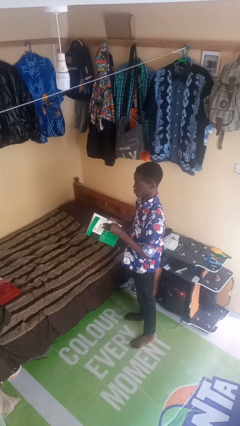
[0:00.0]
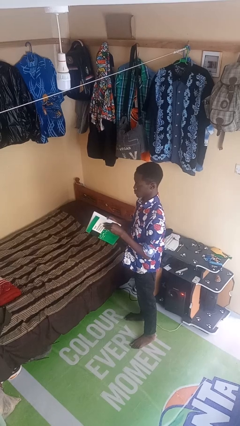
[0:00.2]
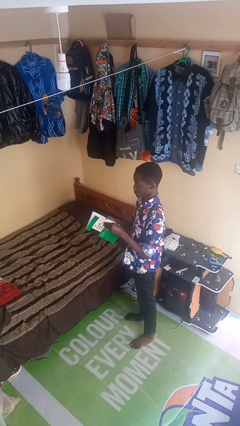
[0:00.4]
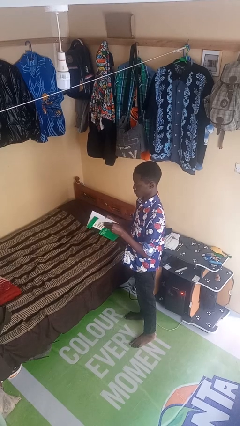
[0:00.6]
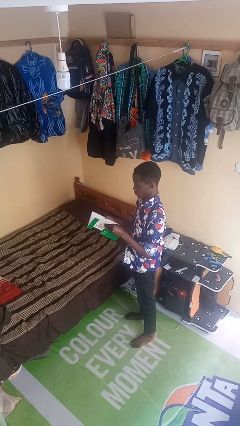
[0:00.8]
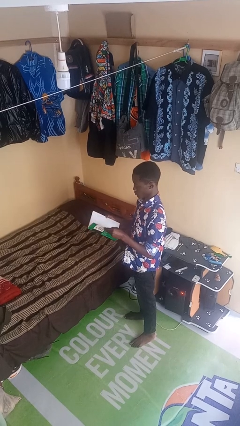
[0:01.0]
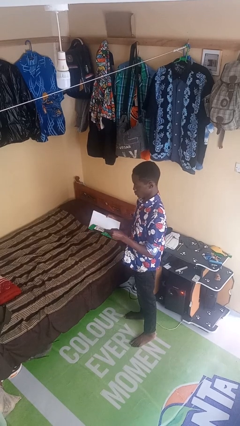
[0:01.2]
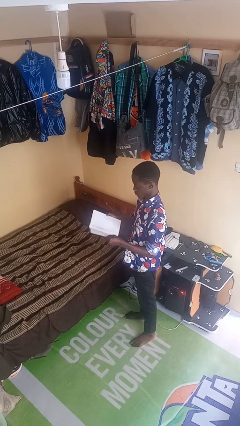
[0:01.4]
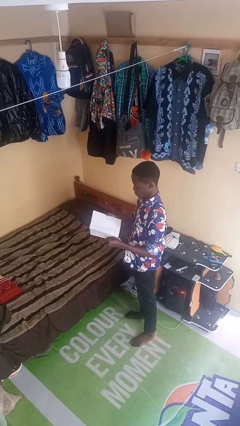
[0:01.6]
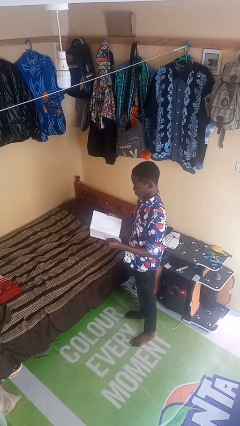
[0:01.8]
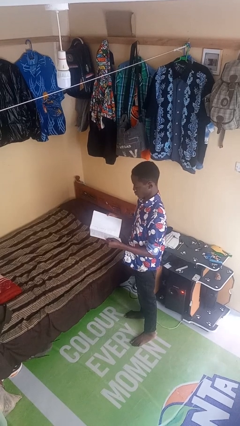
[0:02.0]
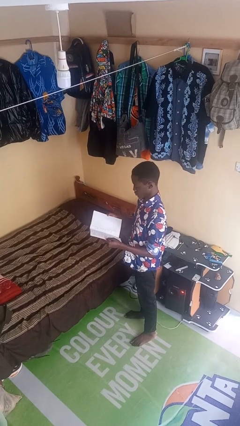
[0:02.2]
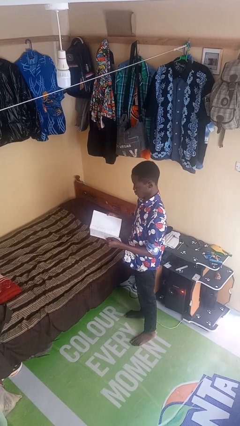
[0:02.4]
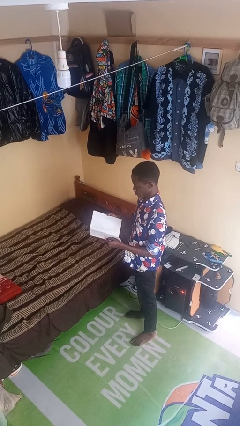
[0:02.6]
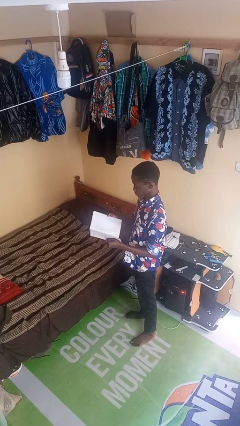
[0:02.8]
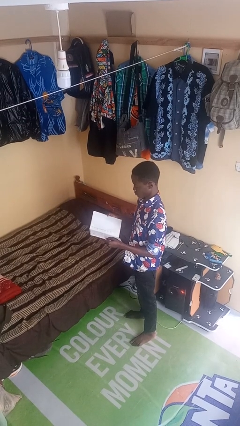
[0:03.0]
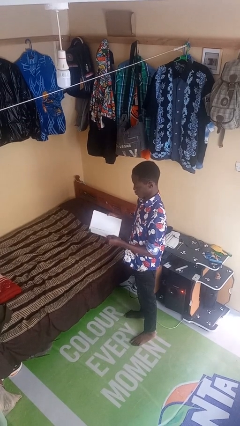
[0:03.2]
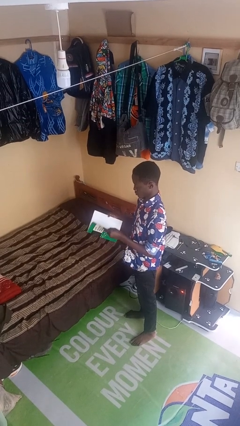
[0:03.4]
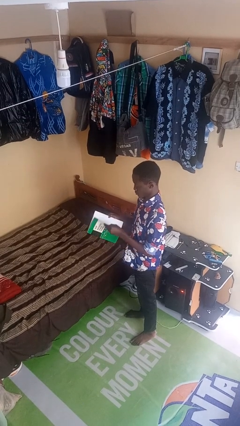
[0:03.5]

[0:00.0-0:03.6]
person reads magazine

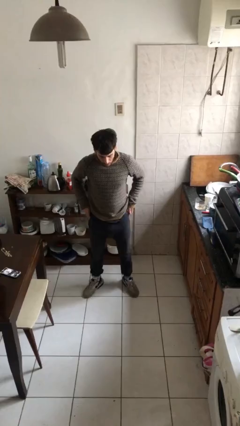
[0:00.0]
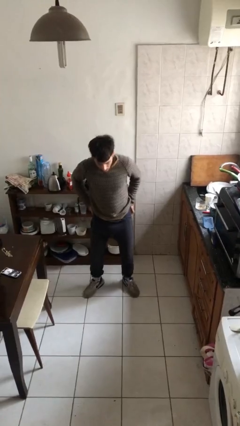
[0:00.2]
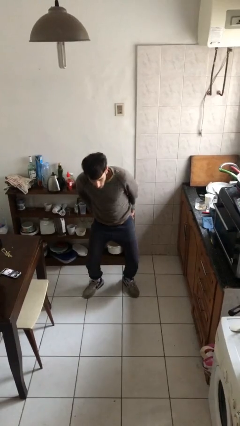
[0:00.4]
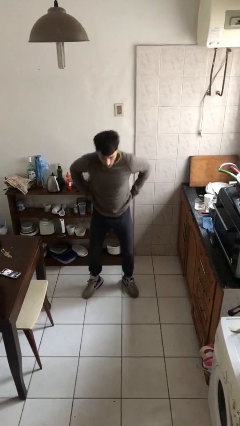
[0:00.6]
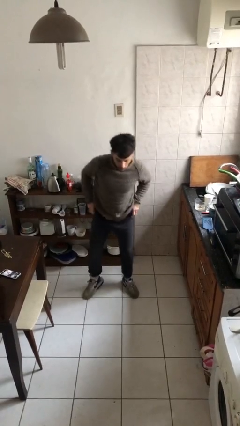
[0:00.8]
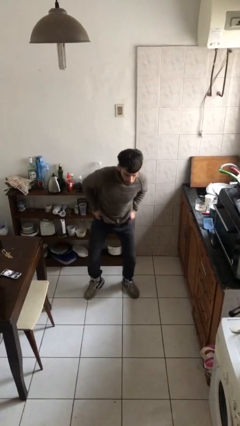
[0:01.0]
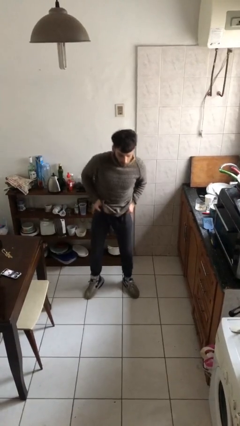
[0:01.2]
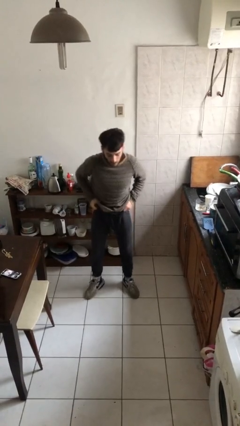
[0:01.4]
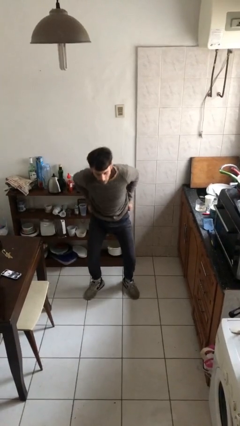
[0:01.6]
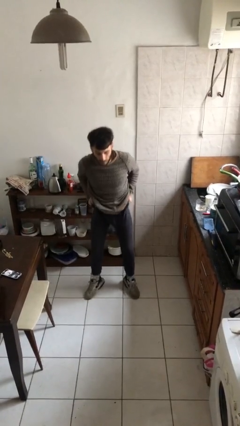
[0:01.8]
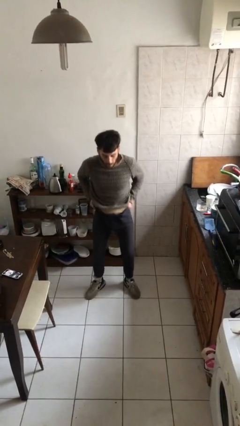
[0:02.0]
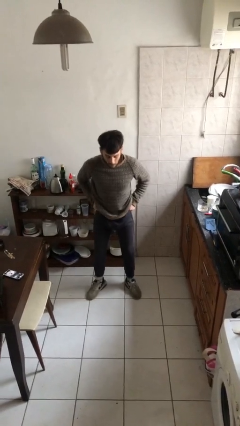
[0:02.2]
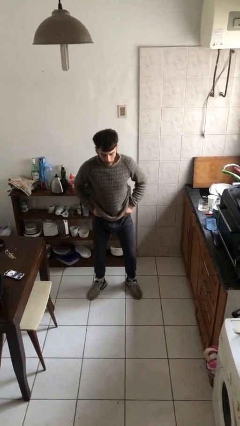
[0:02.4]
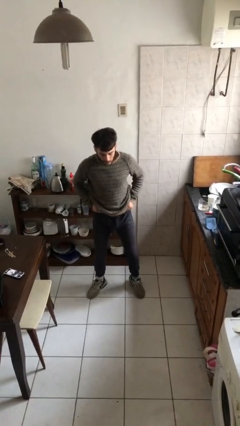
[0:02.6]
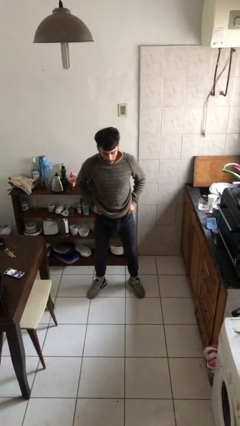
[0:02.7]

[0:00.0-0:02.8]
person hikes up pants

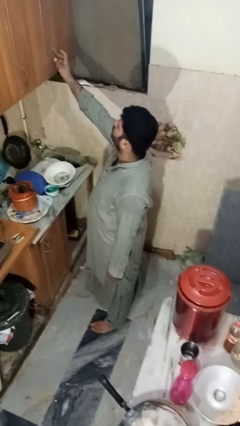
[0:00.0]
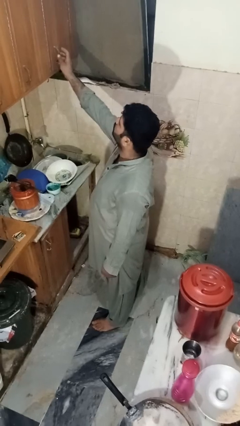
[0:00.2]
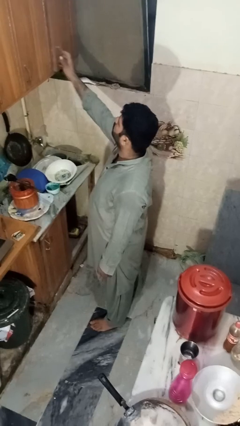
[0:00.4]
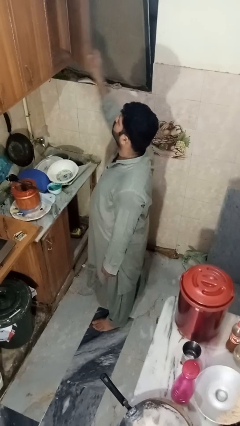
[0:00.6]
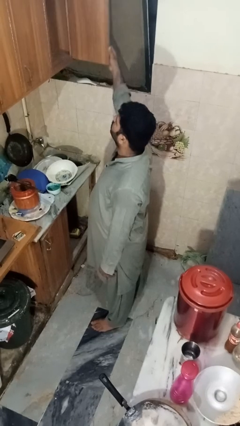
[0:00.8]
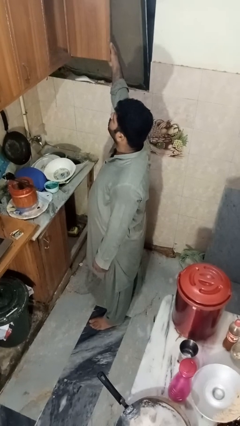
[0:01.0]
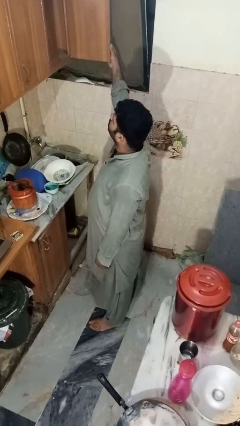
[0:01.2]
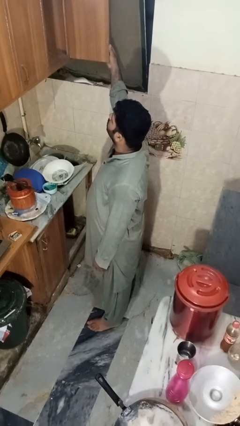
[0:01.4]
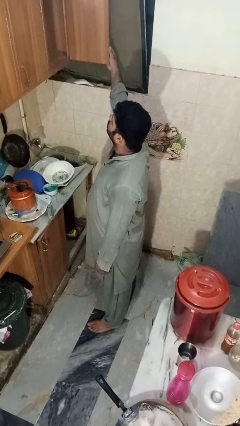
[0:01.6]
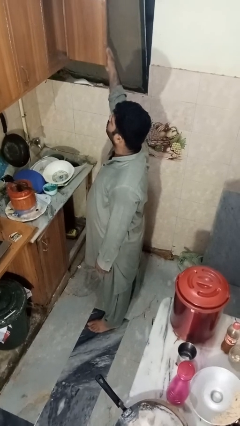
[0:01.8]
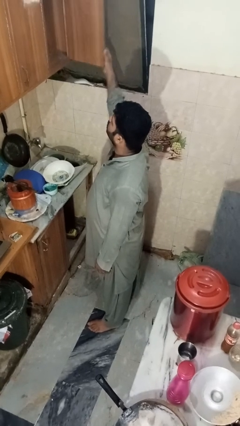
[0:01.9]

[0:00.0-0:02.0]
person opens cabinet

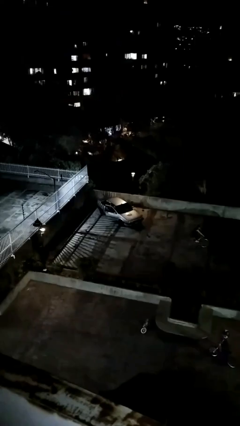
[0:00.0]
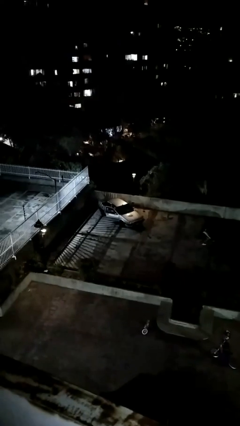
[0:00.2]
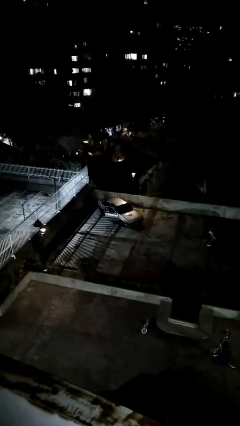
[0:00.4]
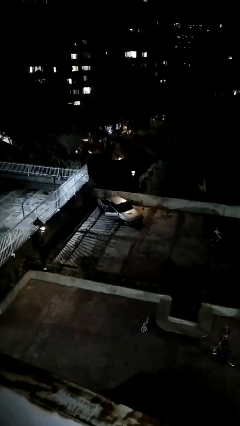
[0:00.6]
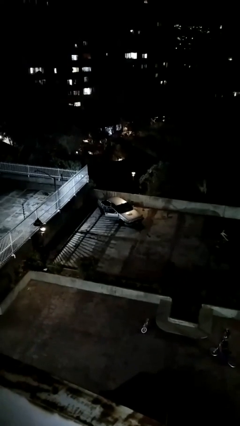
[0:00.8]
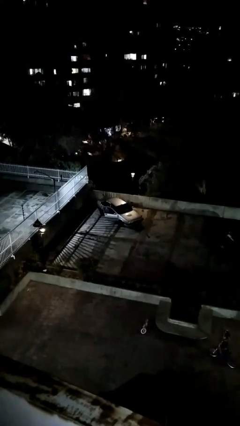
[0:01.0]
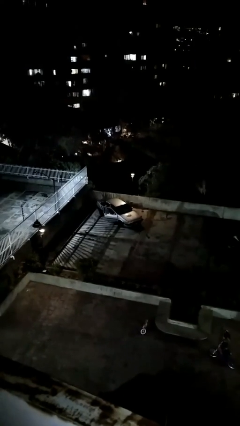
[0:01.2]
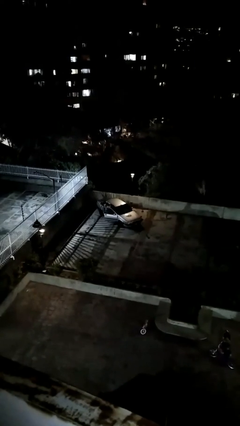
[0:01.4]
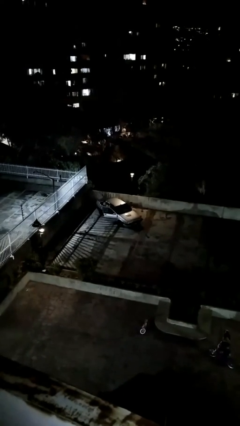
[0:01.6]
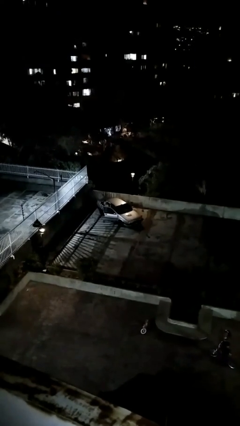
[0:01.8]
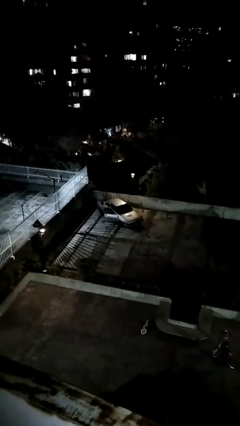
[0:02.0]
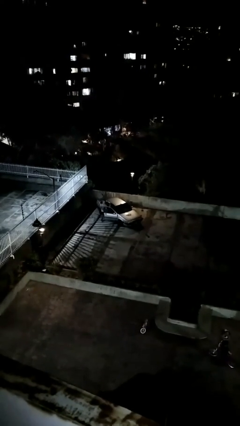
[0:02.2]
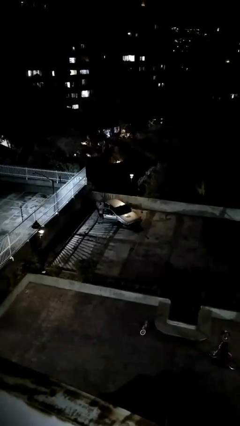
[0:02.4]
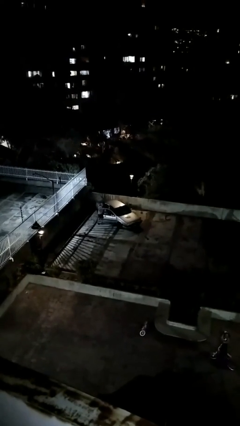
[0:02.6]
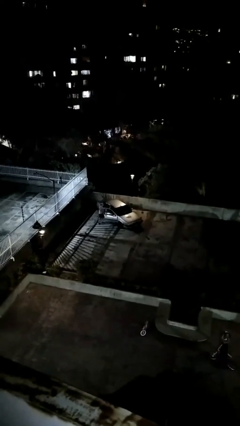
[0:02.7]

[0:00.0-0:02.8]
car drops off person

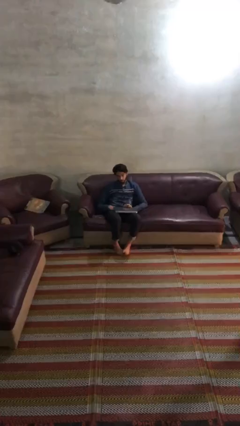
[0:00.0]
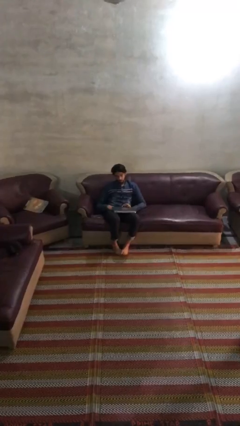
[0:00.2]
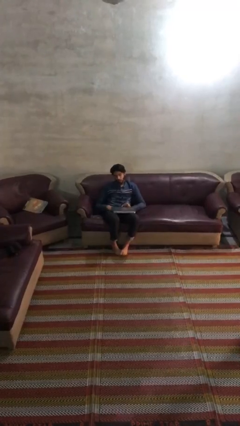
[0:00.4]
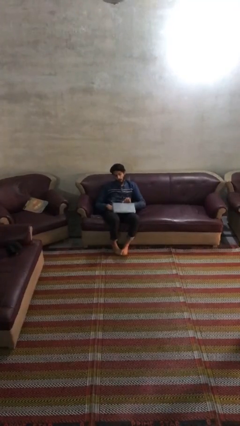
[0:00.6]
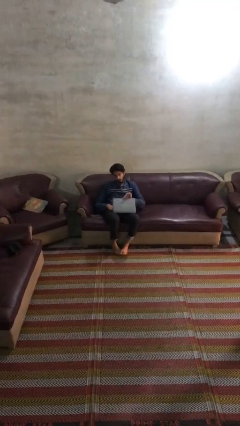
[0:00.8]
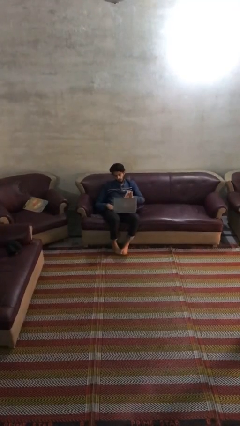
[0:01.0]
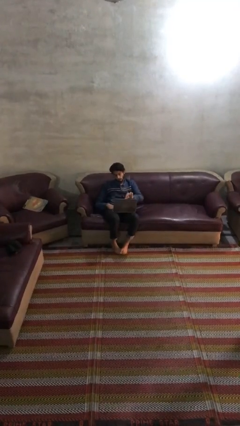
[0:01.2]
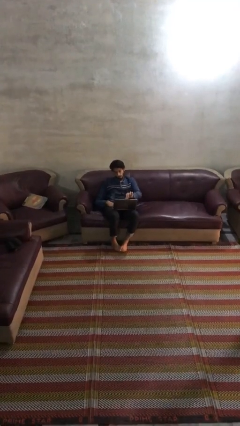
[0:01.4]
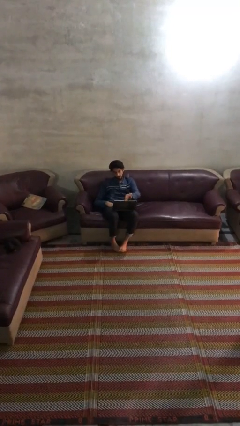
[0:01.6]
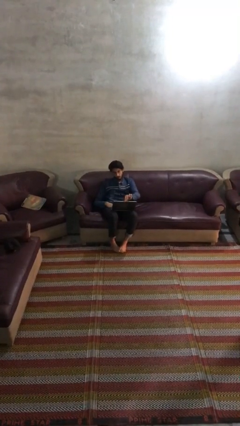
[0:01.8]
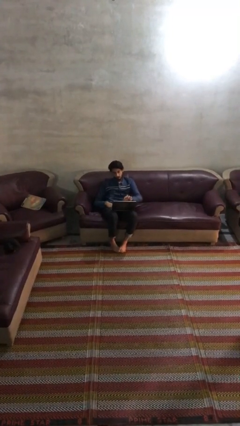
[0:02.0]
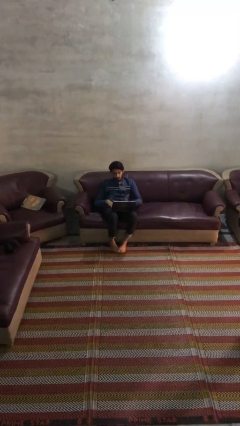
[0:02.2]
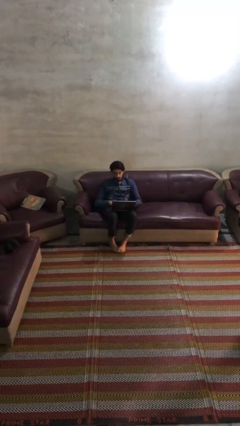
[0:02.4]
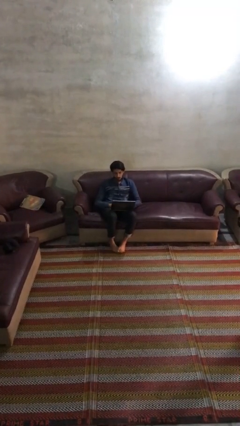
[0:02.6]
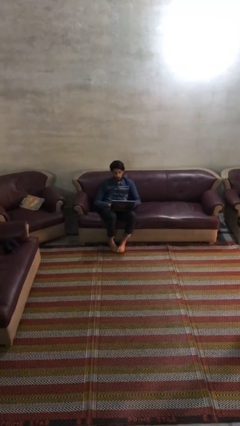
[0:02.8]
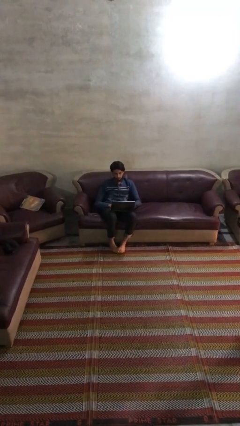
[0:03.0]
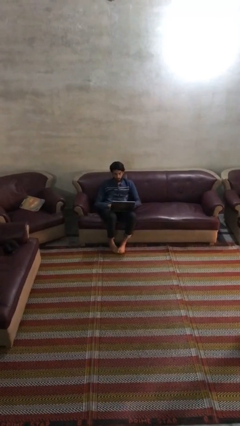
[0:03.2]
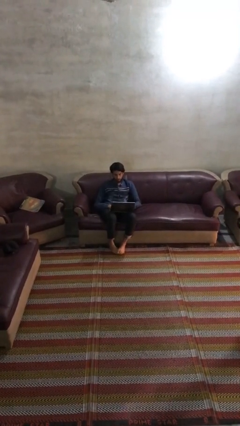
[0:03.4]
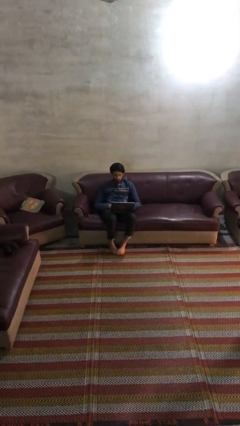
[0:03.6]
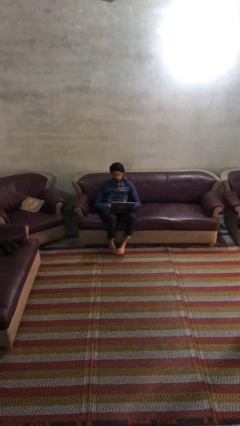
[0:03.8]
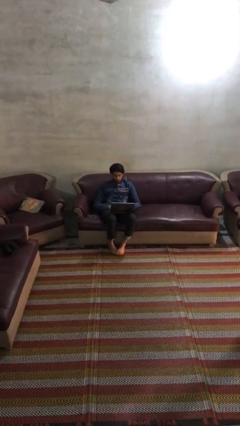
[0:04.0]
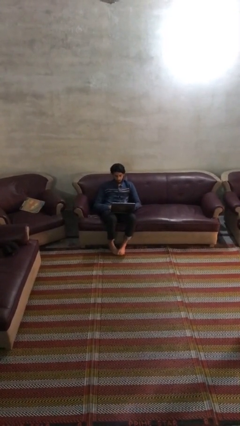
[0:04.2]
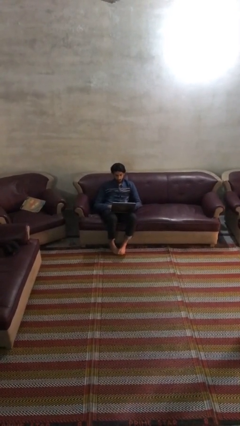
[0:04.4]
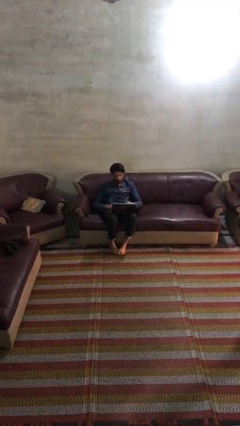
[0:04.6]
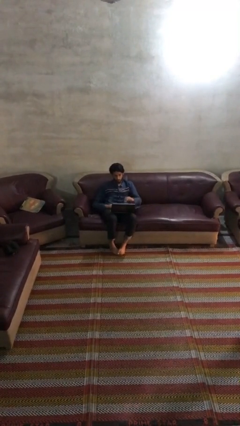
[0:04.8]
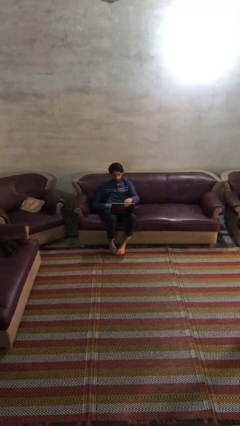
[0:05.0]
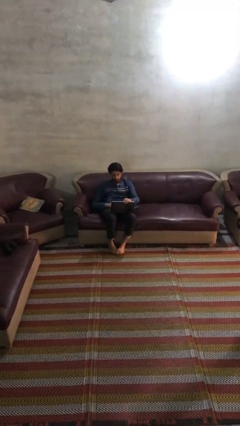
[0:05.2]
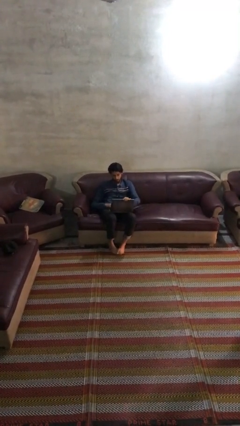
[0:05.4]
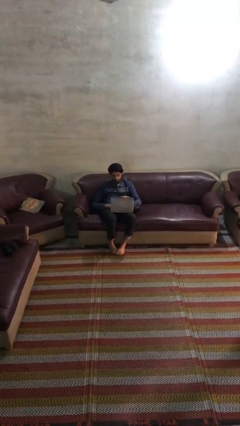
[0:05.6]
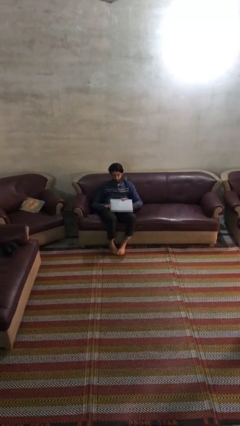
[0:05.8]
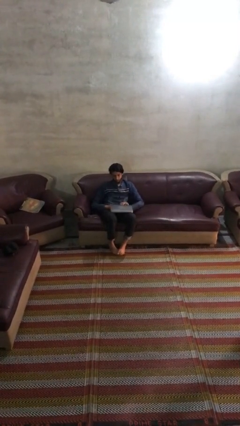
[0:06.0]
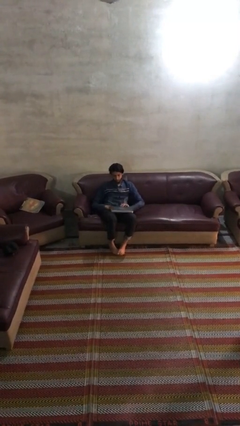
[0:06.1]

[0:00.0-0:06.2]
person interacts with laptop

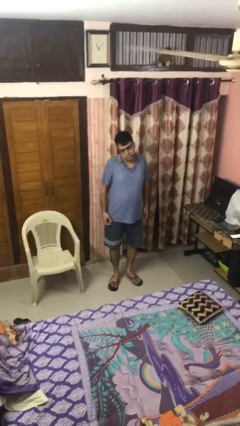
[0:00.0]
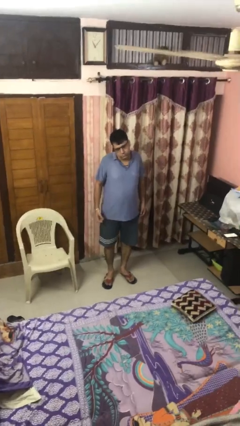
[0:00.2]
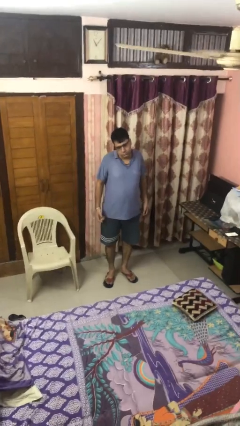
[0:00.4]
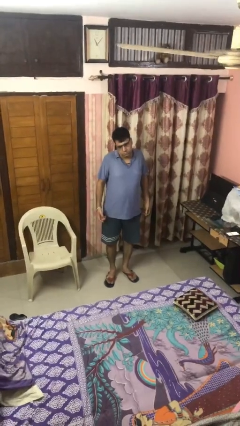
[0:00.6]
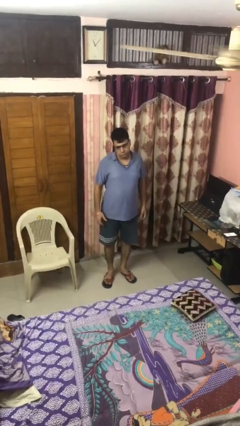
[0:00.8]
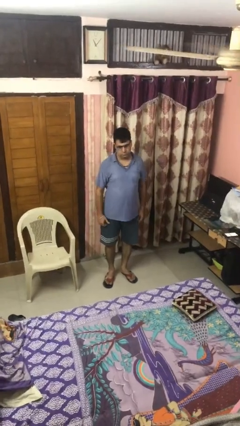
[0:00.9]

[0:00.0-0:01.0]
person shrugs
